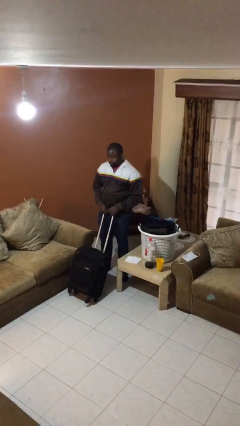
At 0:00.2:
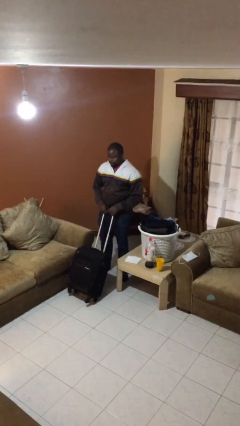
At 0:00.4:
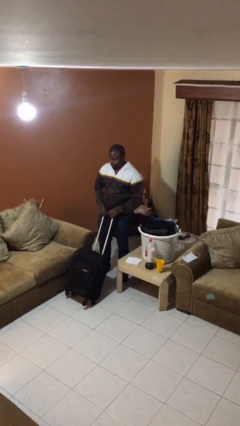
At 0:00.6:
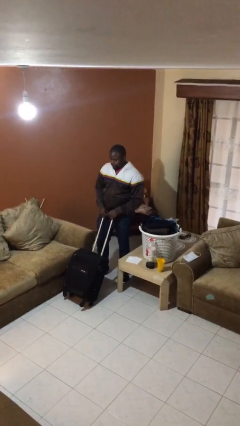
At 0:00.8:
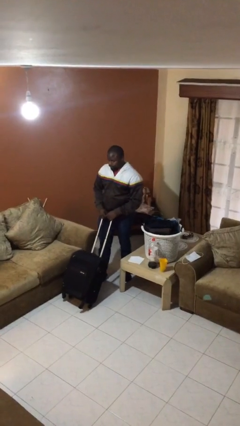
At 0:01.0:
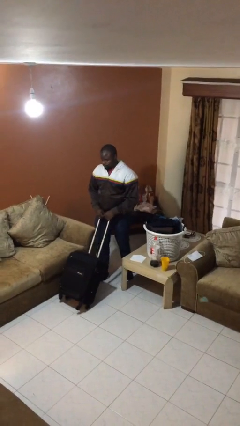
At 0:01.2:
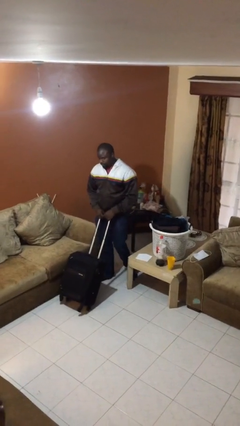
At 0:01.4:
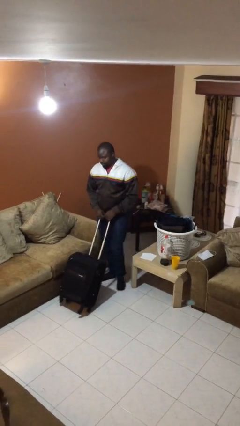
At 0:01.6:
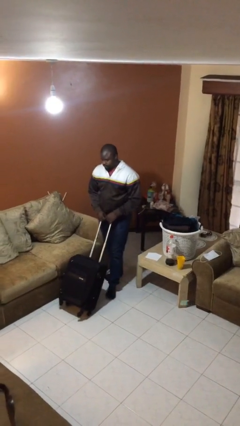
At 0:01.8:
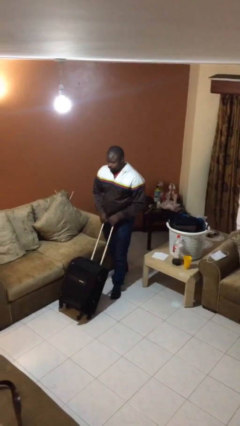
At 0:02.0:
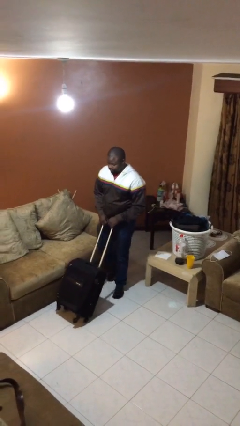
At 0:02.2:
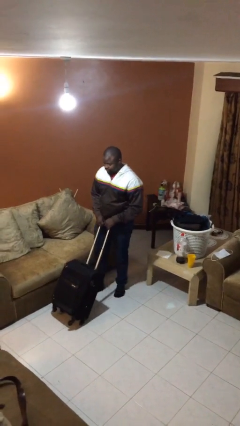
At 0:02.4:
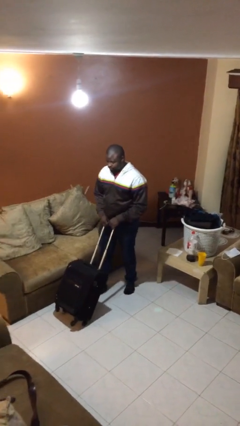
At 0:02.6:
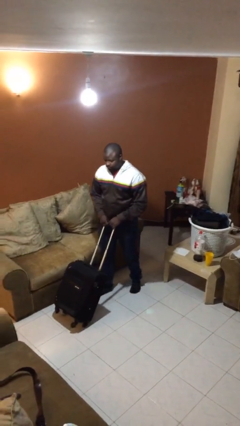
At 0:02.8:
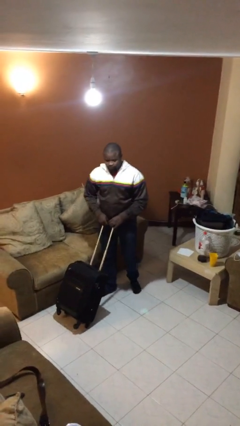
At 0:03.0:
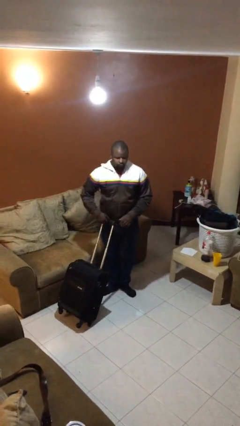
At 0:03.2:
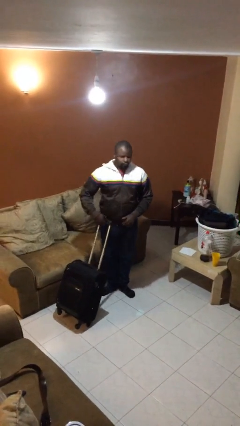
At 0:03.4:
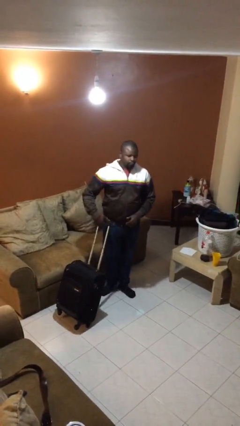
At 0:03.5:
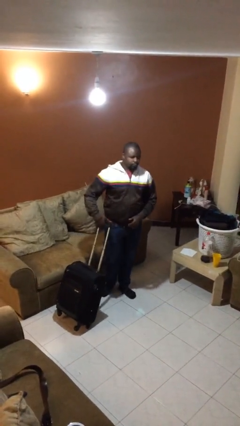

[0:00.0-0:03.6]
person pushes wheeled cart

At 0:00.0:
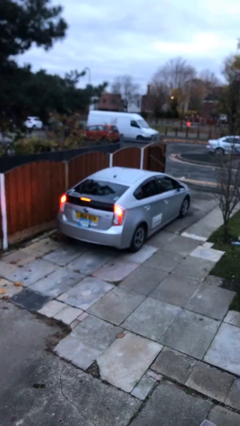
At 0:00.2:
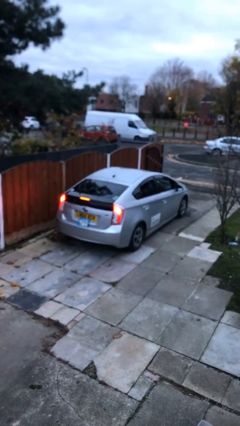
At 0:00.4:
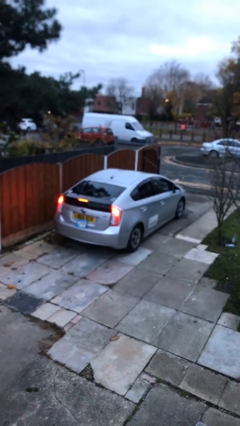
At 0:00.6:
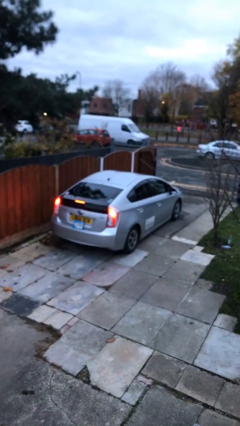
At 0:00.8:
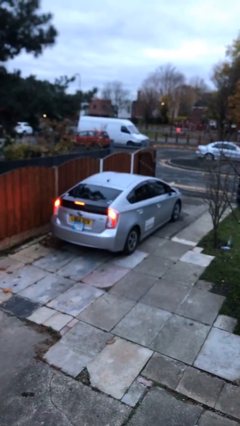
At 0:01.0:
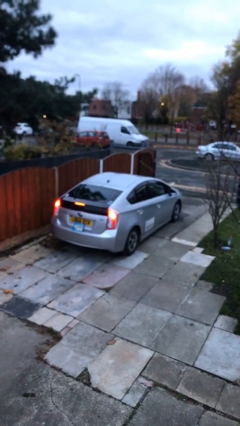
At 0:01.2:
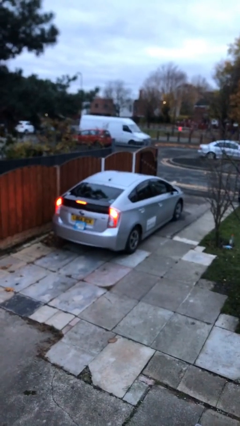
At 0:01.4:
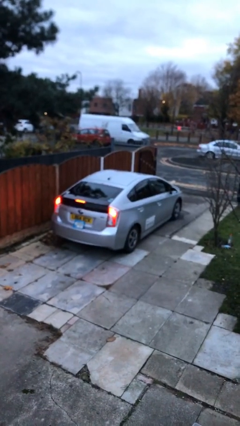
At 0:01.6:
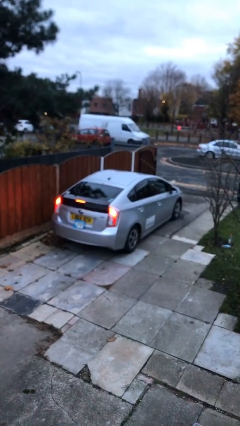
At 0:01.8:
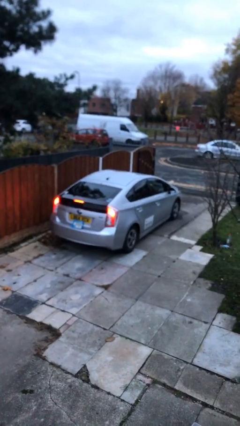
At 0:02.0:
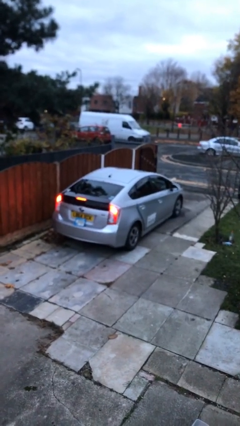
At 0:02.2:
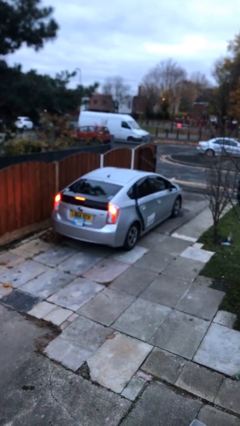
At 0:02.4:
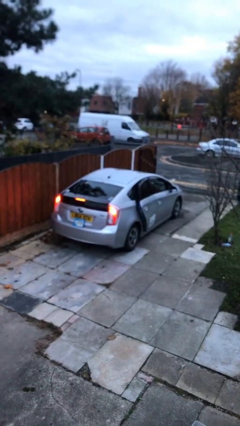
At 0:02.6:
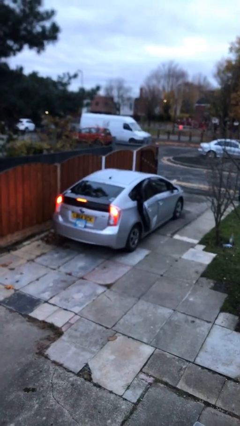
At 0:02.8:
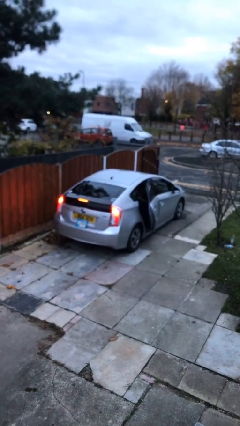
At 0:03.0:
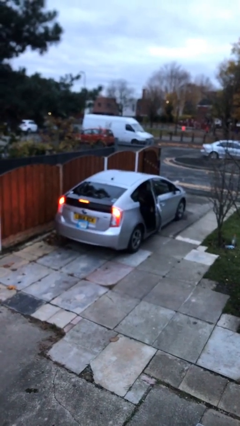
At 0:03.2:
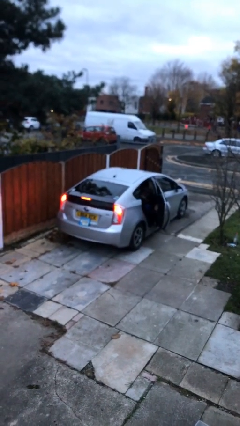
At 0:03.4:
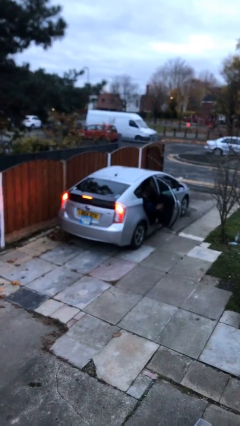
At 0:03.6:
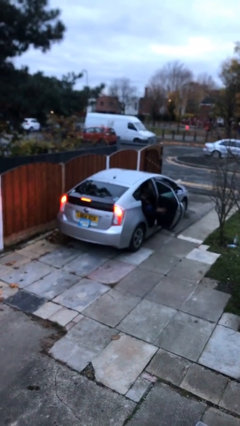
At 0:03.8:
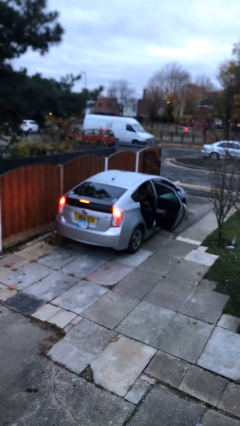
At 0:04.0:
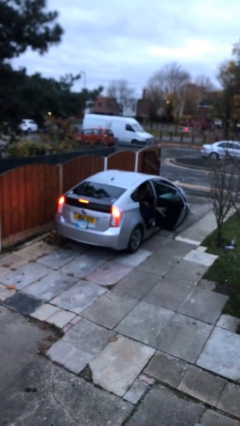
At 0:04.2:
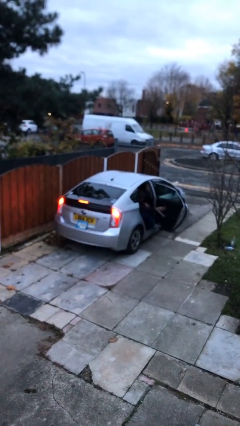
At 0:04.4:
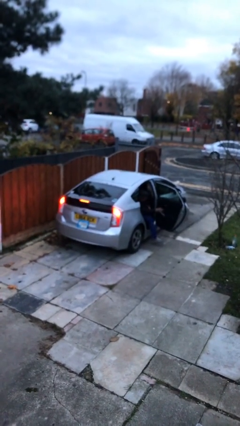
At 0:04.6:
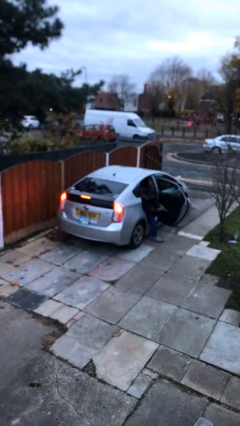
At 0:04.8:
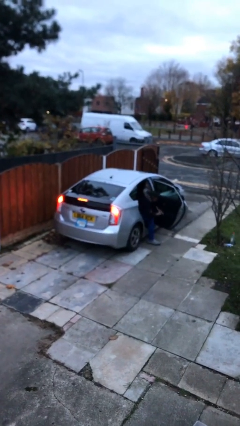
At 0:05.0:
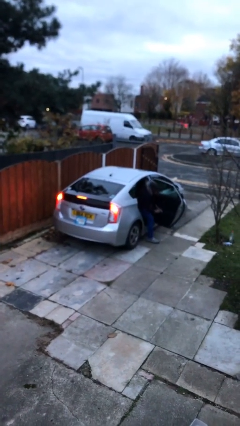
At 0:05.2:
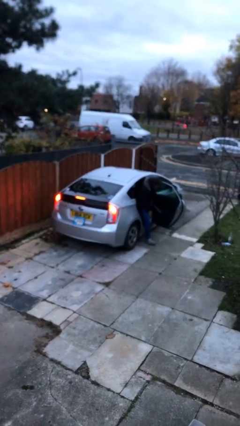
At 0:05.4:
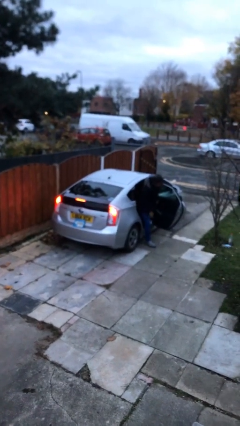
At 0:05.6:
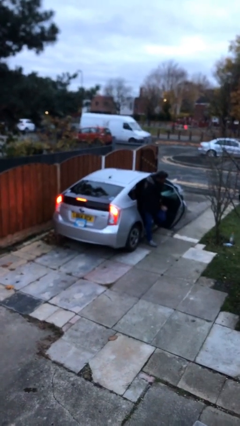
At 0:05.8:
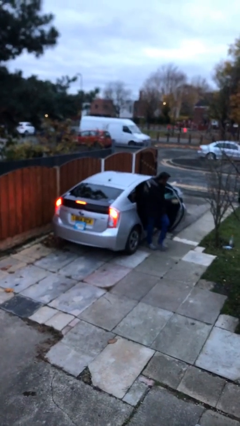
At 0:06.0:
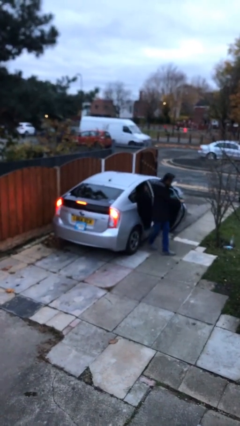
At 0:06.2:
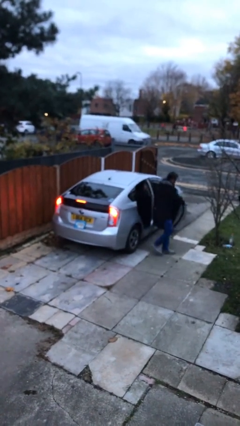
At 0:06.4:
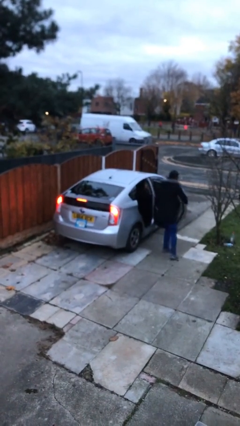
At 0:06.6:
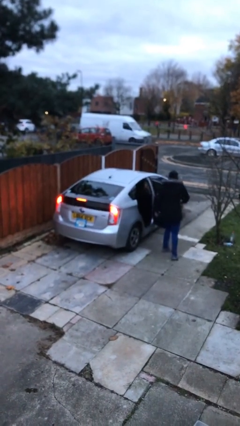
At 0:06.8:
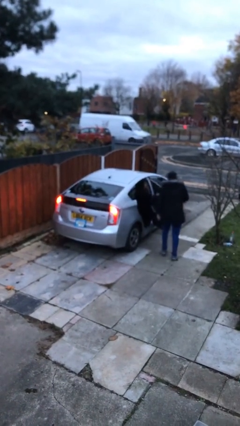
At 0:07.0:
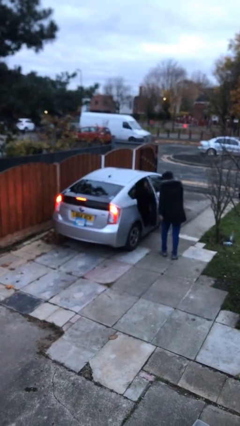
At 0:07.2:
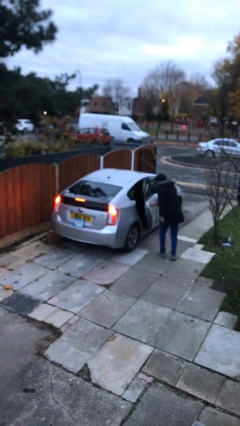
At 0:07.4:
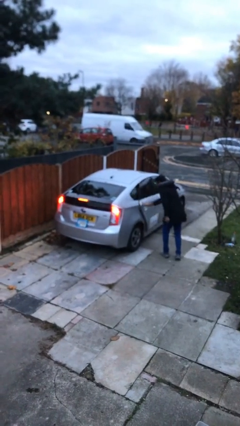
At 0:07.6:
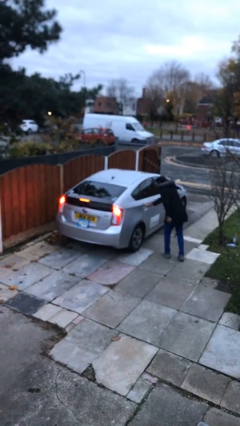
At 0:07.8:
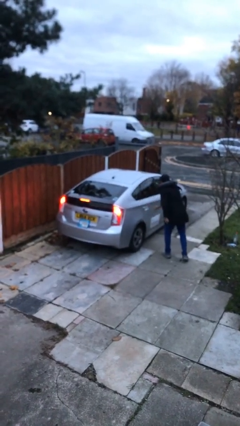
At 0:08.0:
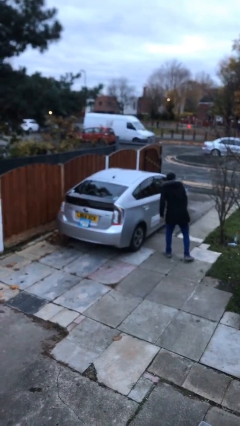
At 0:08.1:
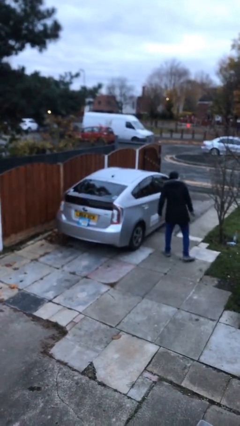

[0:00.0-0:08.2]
car drops off person

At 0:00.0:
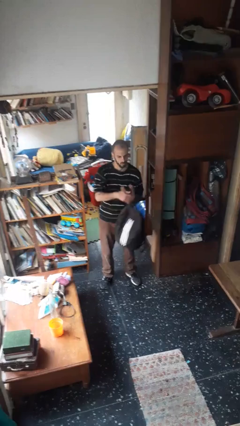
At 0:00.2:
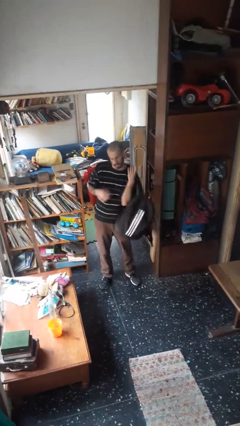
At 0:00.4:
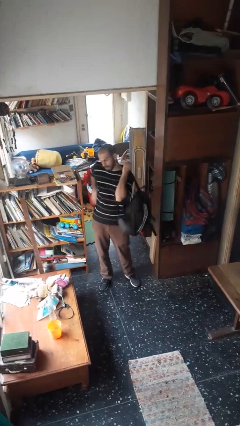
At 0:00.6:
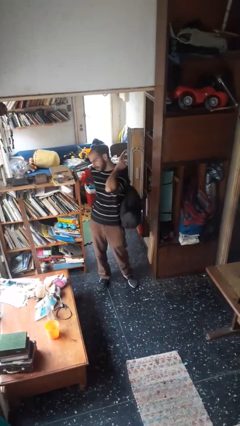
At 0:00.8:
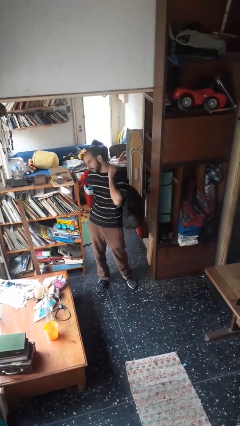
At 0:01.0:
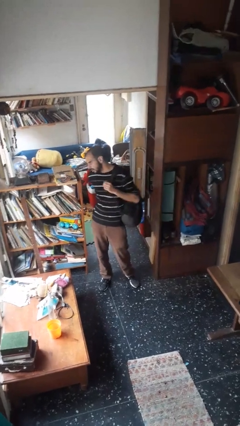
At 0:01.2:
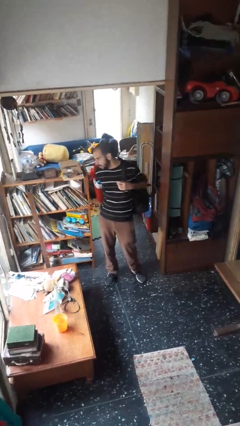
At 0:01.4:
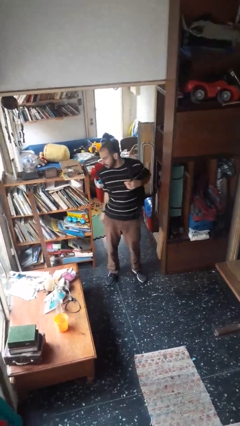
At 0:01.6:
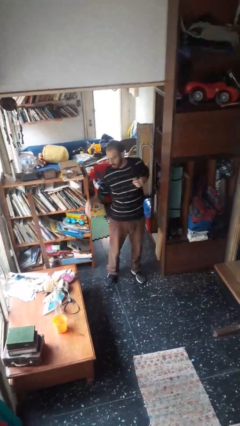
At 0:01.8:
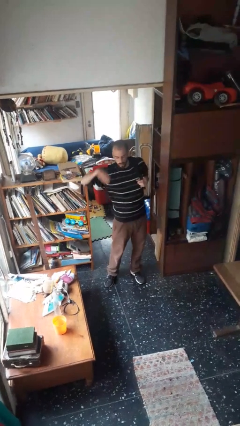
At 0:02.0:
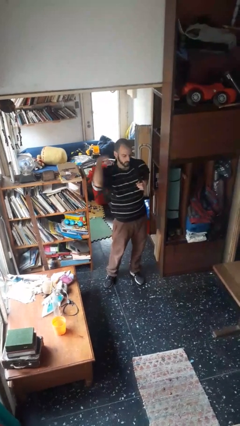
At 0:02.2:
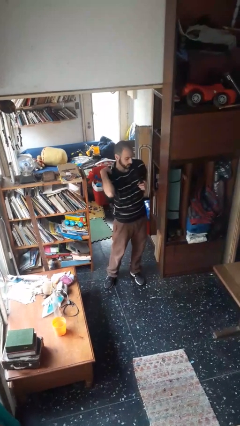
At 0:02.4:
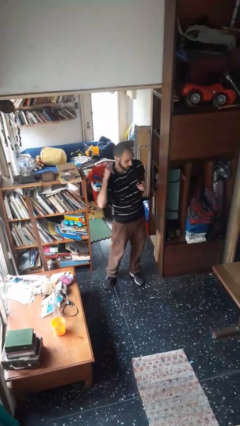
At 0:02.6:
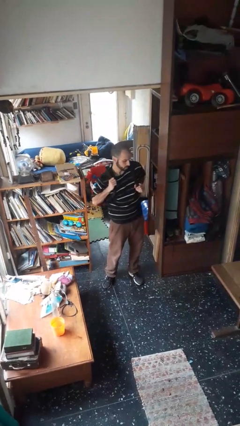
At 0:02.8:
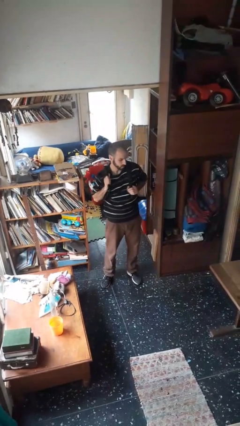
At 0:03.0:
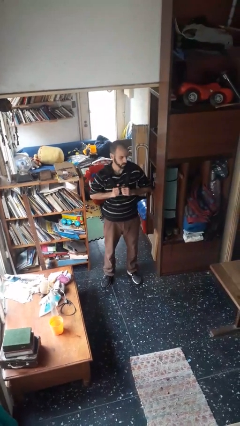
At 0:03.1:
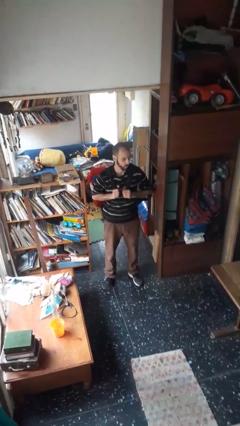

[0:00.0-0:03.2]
person puts on backpack

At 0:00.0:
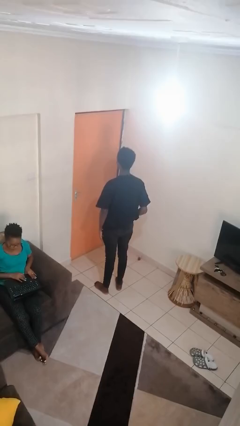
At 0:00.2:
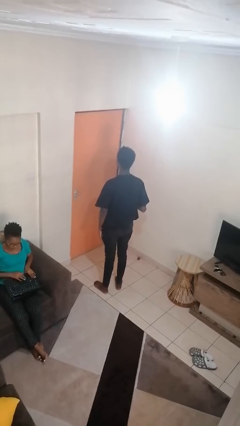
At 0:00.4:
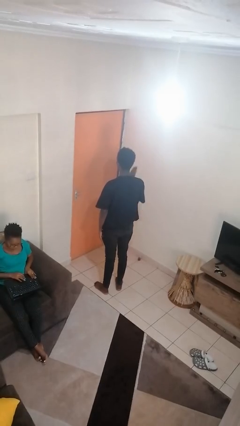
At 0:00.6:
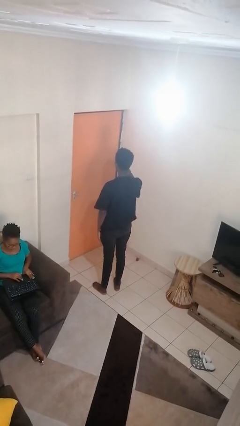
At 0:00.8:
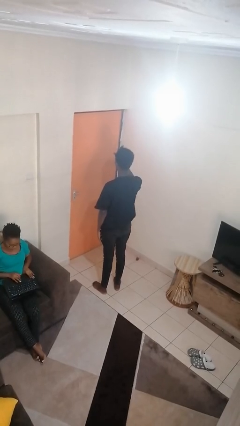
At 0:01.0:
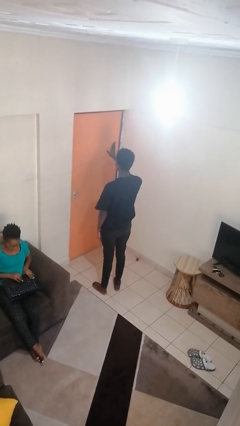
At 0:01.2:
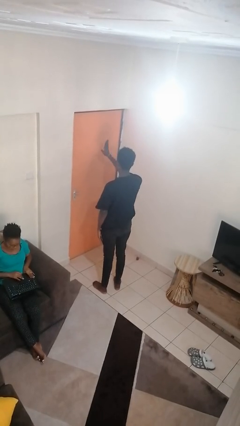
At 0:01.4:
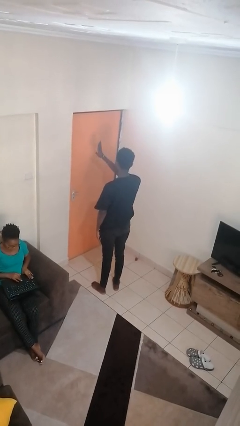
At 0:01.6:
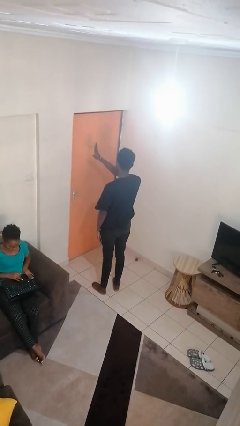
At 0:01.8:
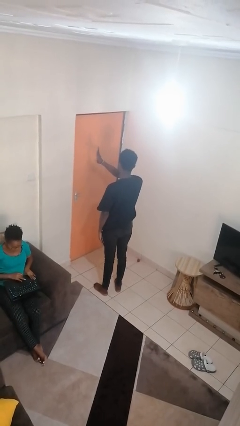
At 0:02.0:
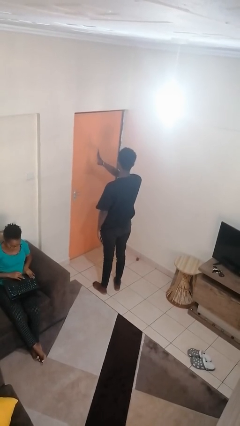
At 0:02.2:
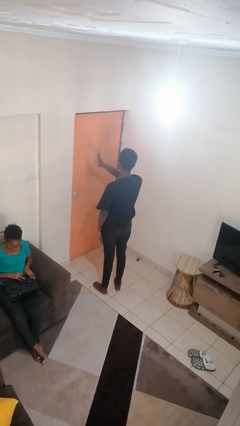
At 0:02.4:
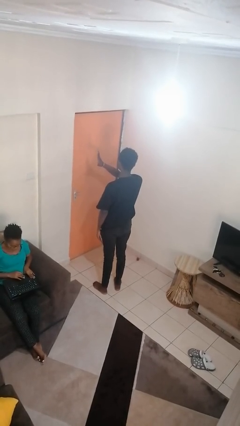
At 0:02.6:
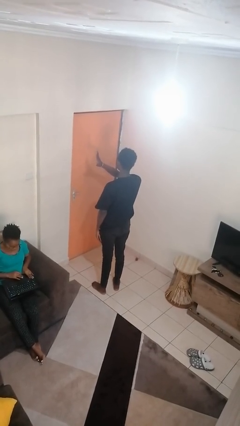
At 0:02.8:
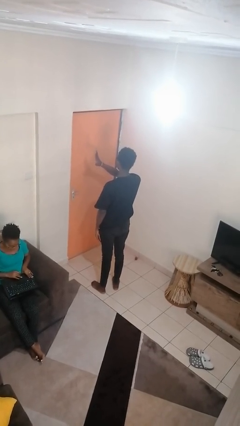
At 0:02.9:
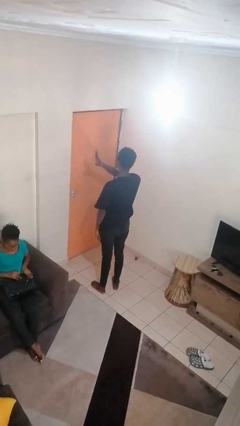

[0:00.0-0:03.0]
person gestures swipe left
